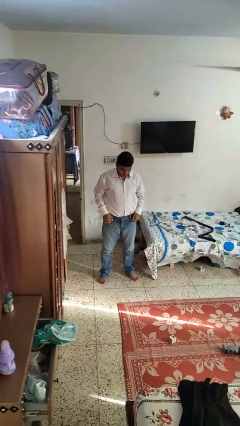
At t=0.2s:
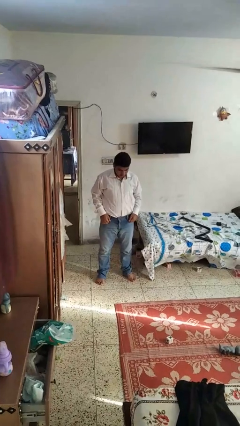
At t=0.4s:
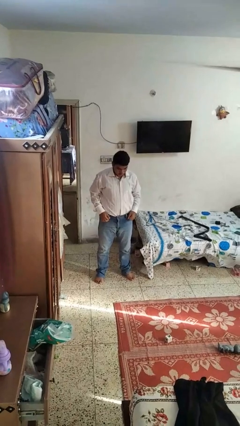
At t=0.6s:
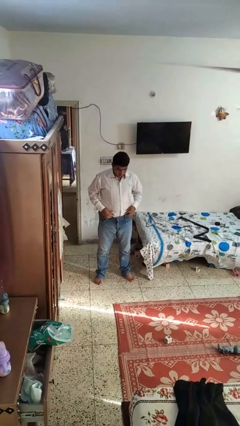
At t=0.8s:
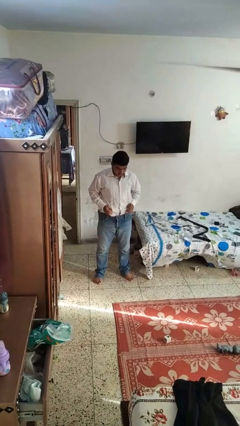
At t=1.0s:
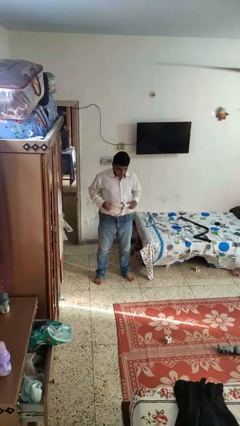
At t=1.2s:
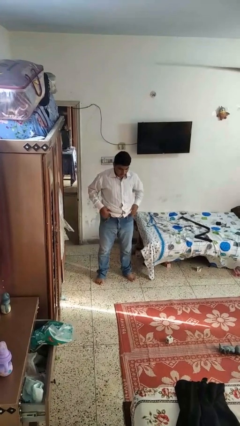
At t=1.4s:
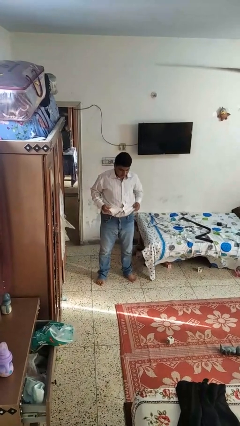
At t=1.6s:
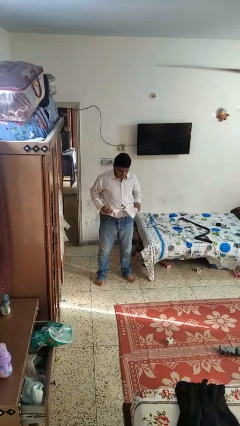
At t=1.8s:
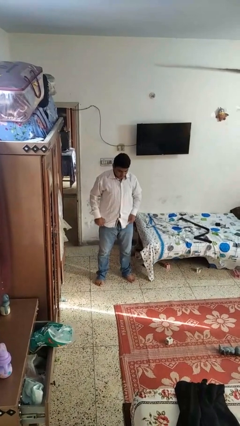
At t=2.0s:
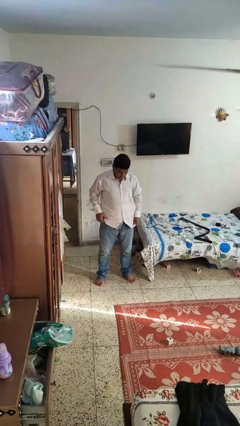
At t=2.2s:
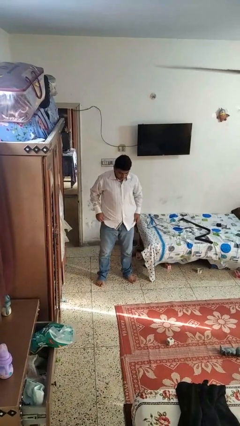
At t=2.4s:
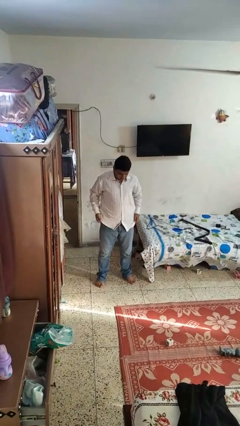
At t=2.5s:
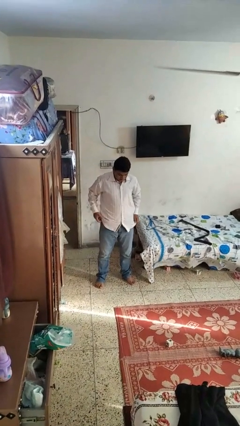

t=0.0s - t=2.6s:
person untucks shirt

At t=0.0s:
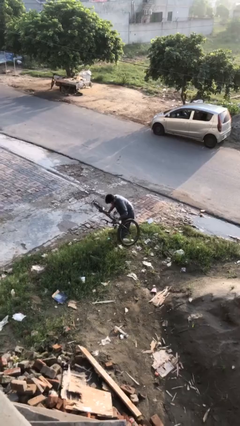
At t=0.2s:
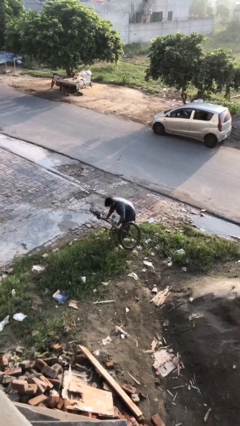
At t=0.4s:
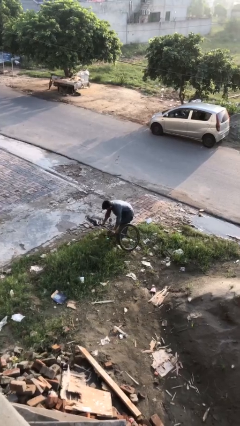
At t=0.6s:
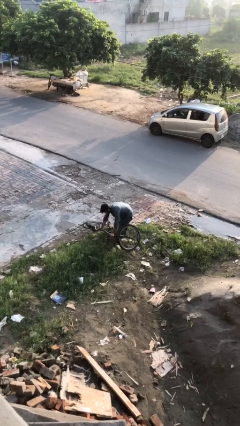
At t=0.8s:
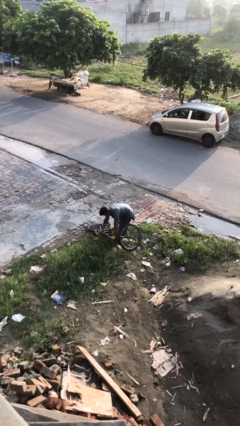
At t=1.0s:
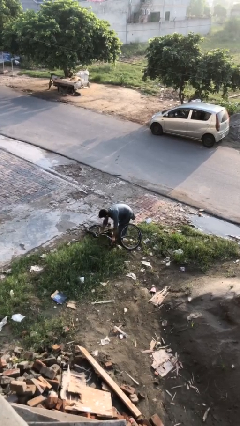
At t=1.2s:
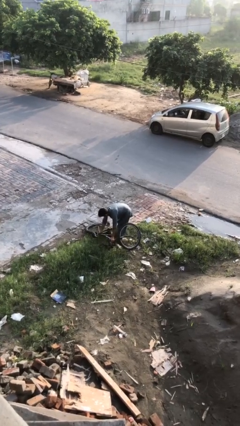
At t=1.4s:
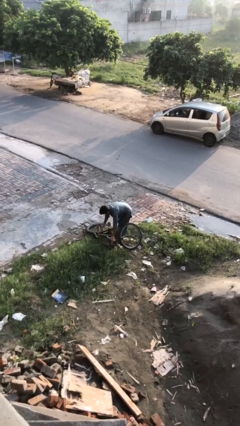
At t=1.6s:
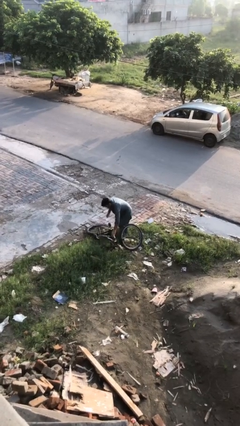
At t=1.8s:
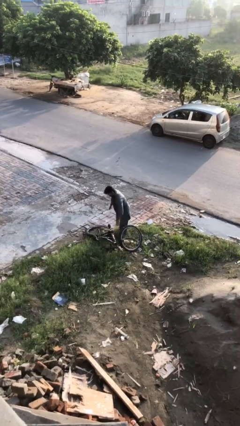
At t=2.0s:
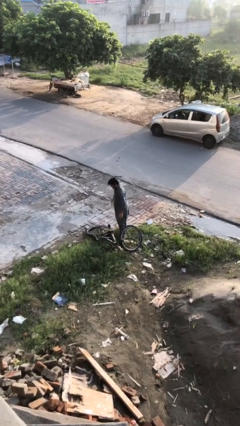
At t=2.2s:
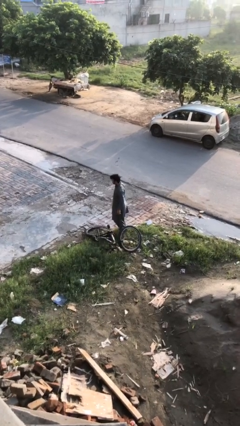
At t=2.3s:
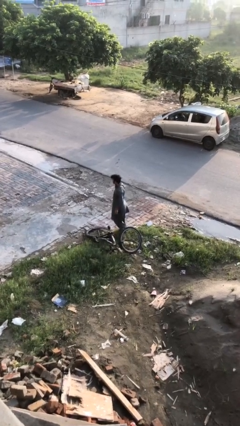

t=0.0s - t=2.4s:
person puts down object on floor

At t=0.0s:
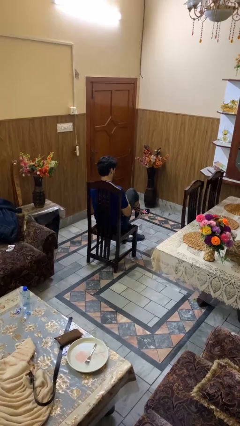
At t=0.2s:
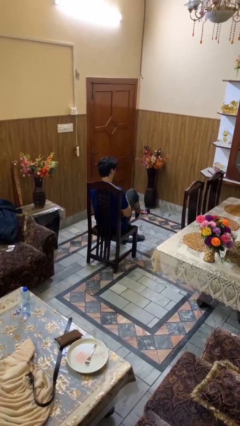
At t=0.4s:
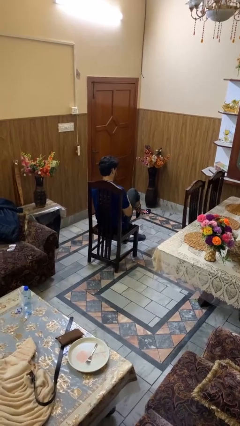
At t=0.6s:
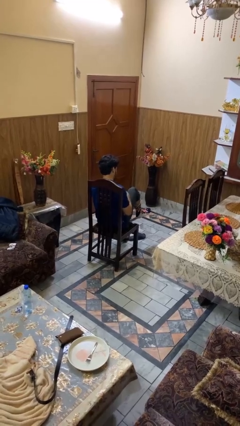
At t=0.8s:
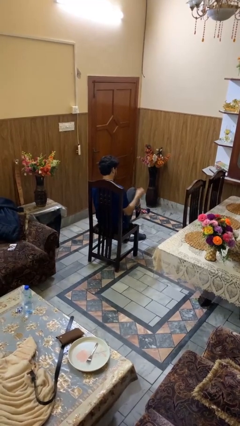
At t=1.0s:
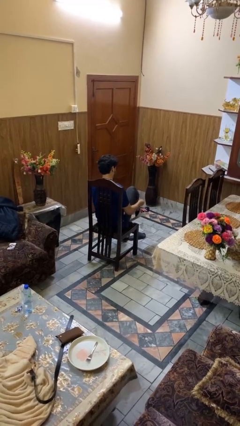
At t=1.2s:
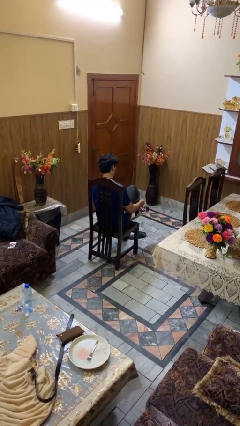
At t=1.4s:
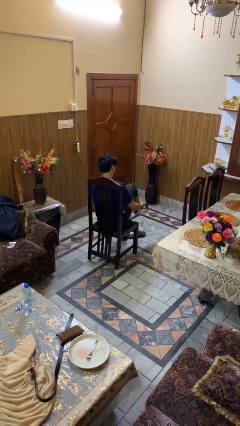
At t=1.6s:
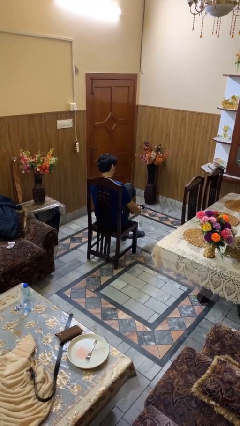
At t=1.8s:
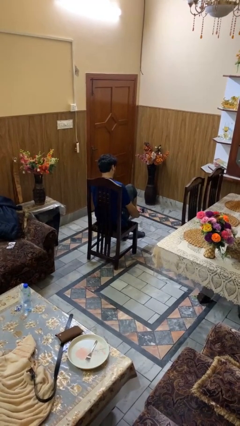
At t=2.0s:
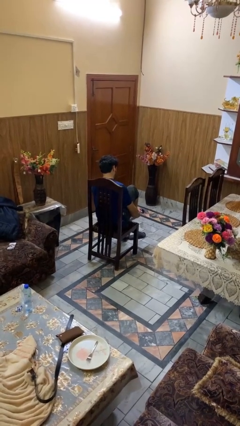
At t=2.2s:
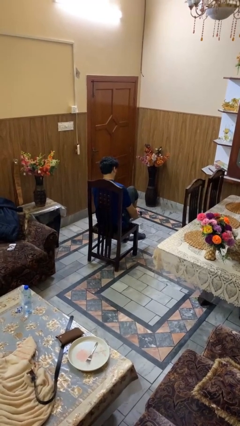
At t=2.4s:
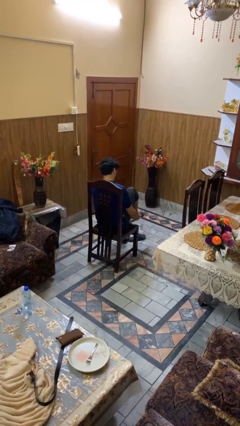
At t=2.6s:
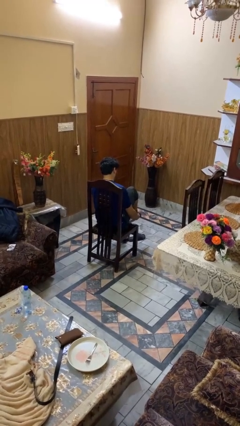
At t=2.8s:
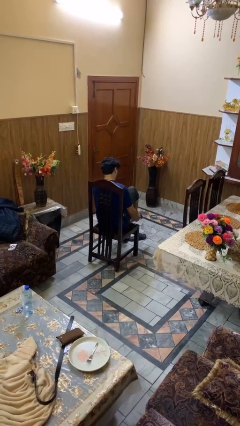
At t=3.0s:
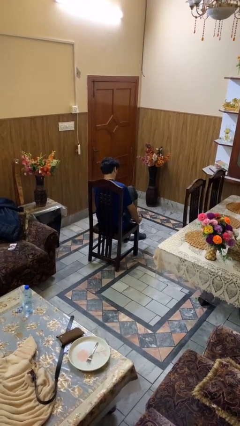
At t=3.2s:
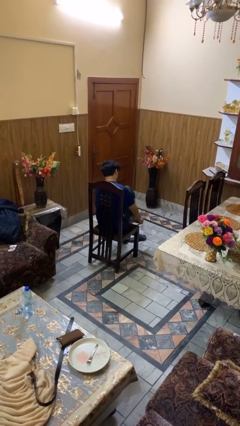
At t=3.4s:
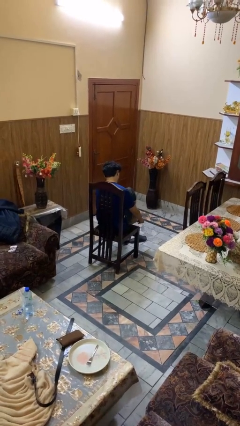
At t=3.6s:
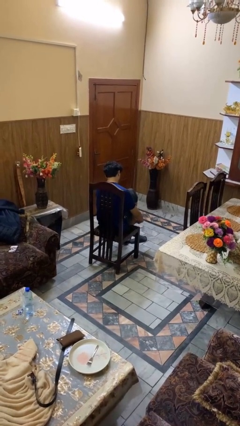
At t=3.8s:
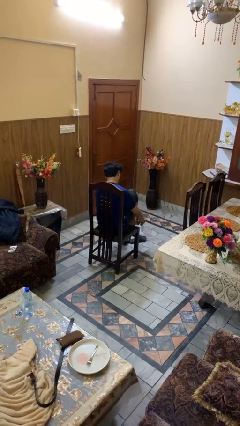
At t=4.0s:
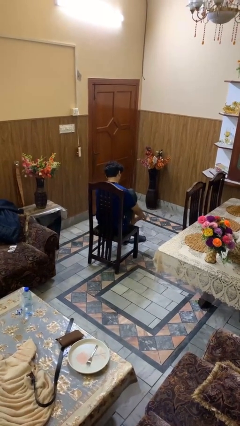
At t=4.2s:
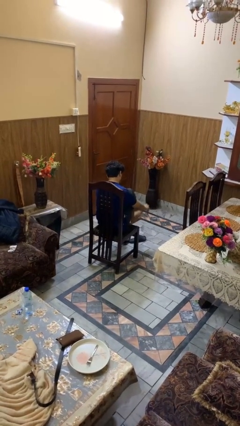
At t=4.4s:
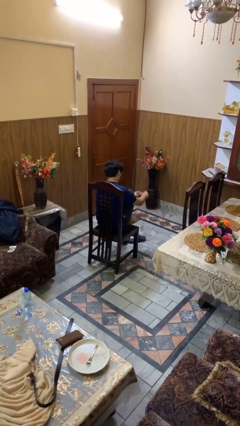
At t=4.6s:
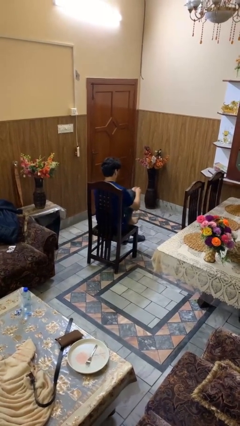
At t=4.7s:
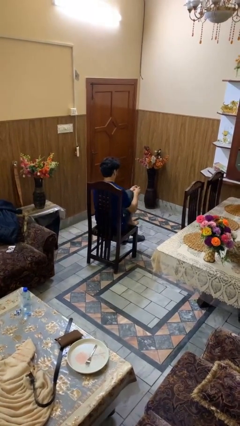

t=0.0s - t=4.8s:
person takes off socks

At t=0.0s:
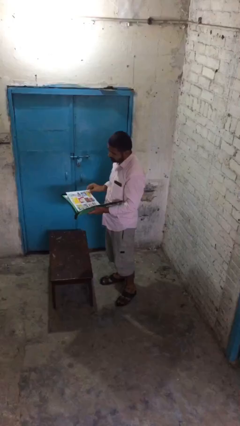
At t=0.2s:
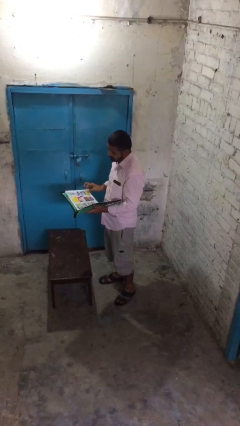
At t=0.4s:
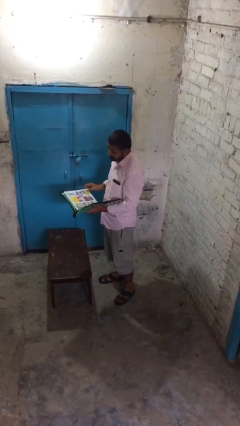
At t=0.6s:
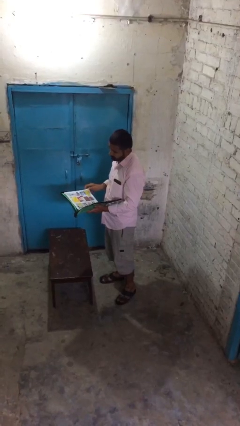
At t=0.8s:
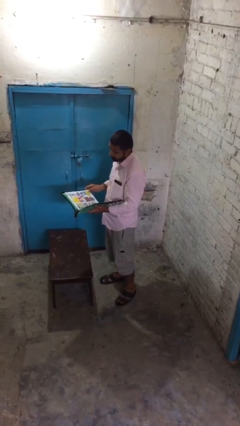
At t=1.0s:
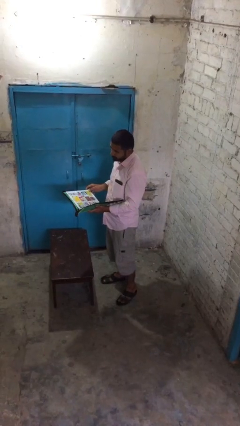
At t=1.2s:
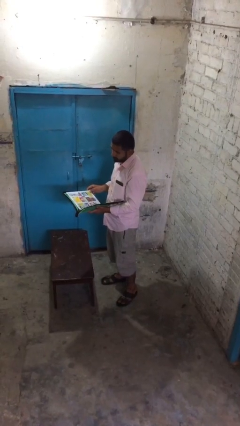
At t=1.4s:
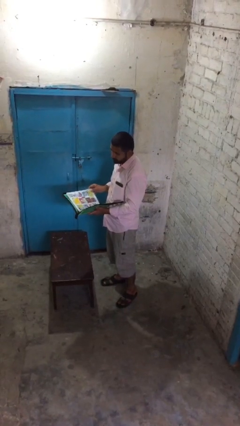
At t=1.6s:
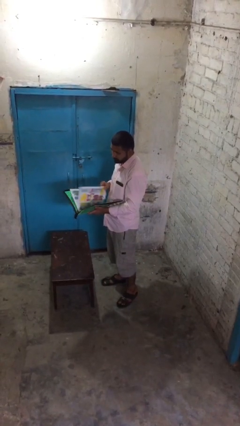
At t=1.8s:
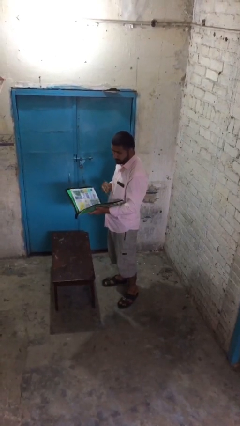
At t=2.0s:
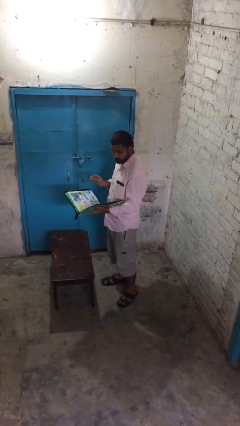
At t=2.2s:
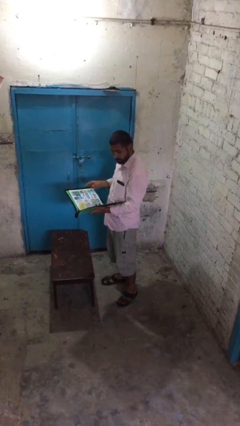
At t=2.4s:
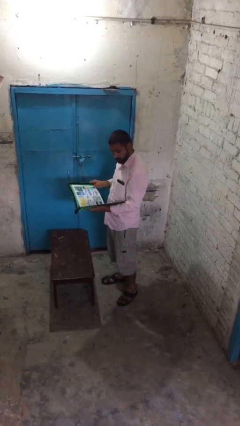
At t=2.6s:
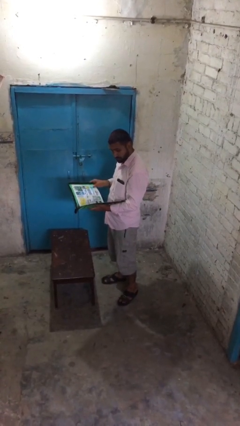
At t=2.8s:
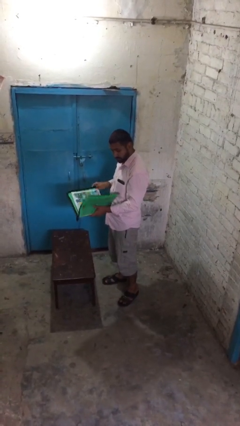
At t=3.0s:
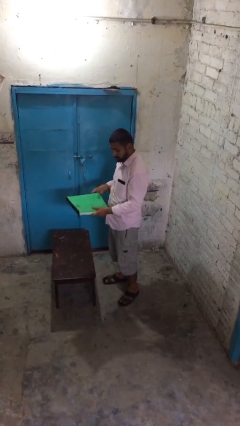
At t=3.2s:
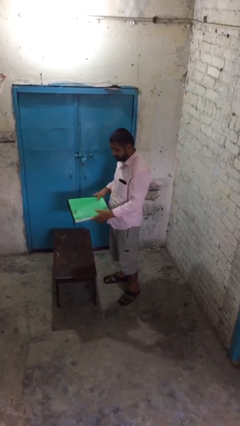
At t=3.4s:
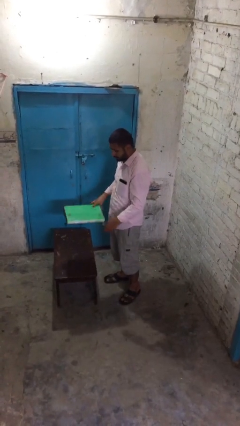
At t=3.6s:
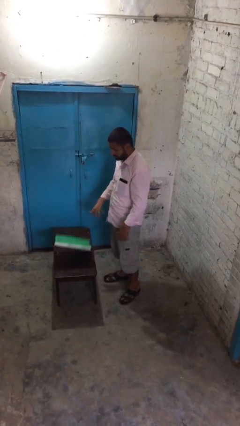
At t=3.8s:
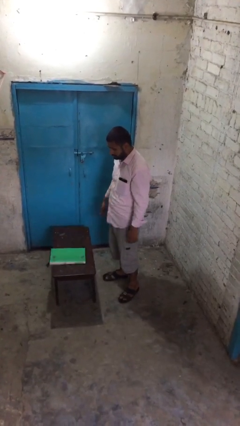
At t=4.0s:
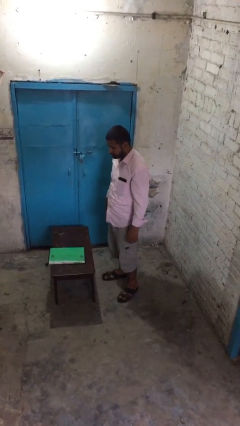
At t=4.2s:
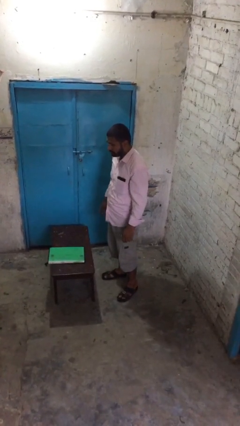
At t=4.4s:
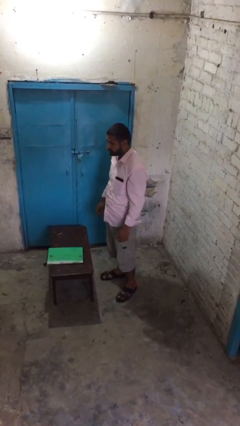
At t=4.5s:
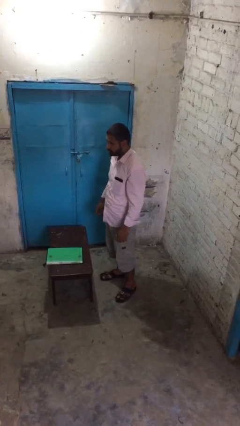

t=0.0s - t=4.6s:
person puts down object on table

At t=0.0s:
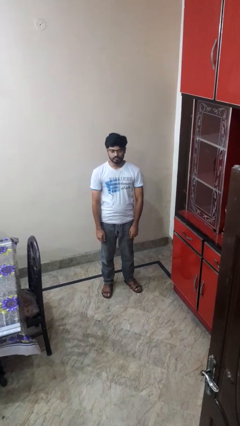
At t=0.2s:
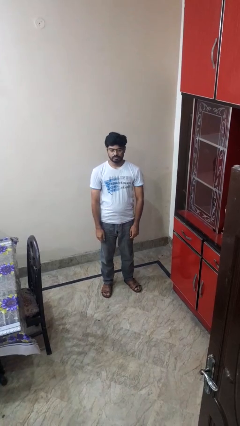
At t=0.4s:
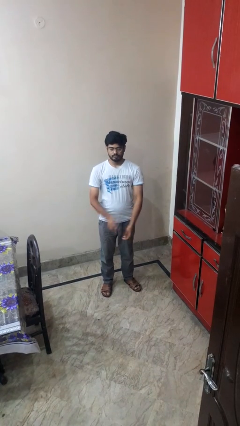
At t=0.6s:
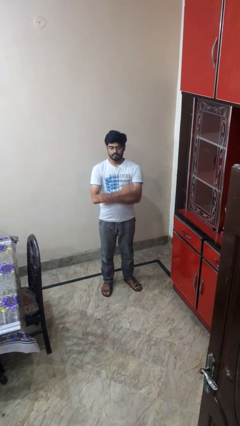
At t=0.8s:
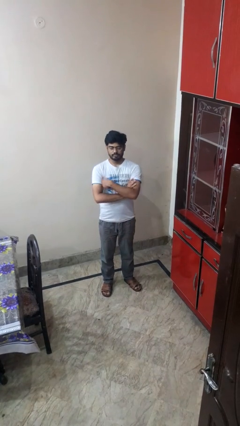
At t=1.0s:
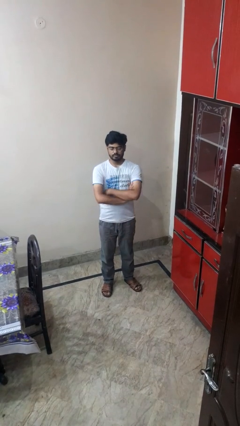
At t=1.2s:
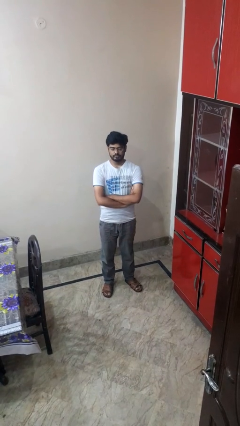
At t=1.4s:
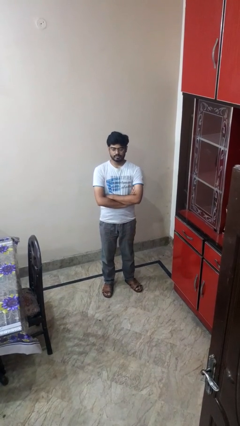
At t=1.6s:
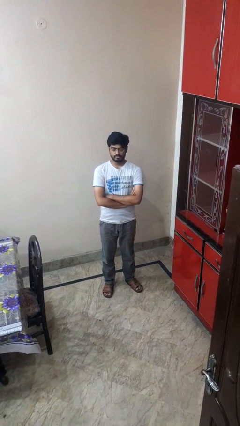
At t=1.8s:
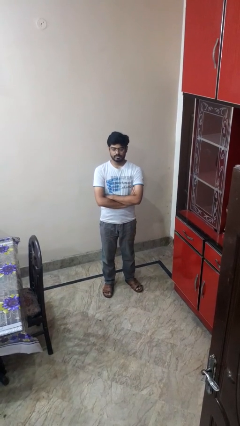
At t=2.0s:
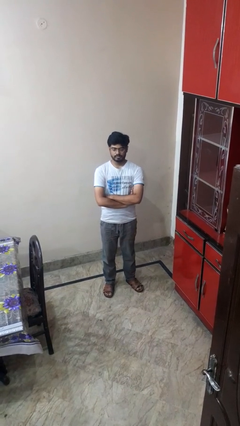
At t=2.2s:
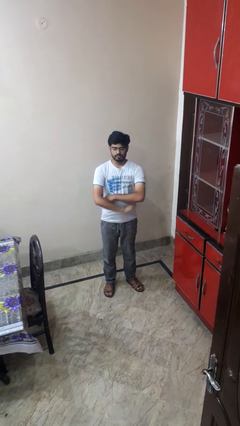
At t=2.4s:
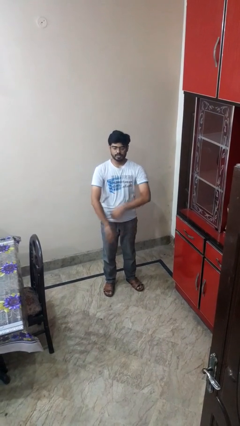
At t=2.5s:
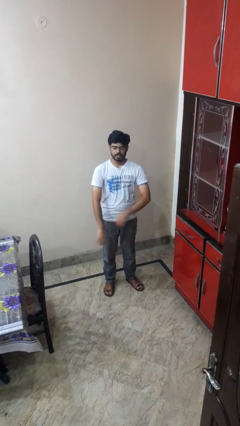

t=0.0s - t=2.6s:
person crosses arms

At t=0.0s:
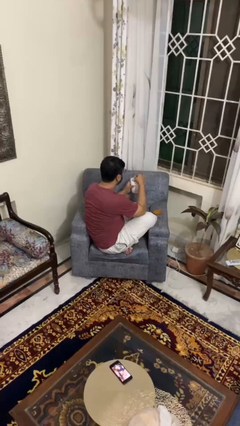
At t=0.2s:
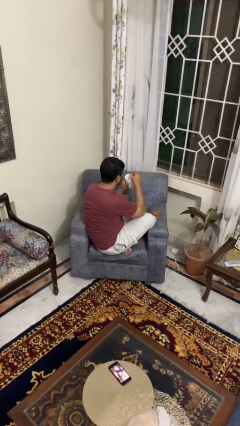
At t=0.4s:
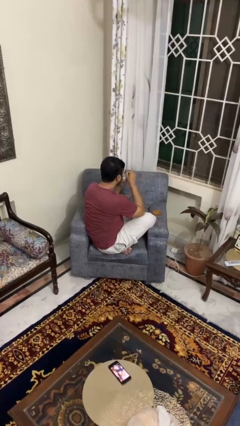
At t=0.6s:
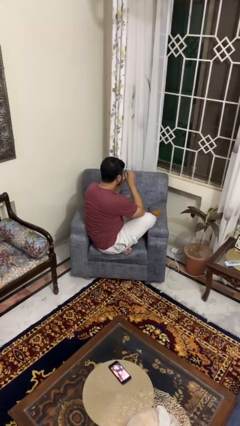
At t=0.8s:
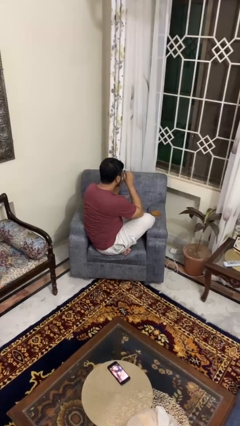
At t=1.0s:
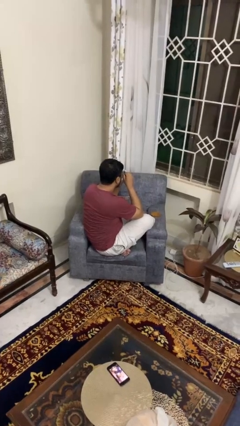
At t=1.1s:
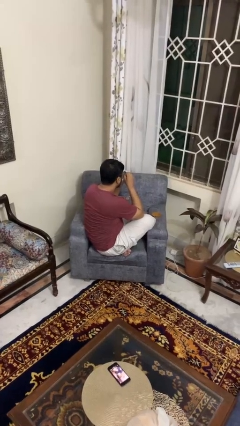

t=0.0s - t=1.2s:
person drinks from mug
